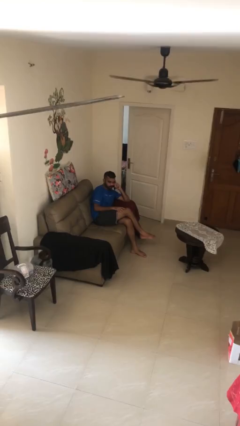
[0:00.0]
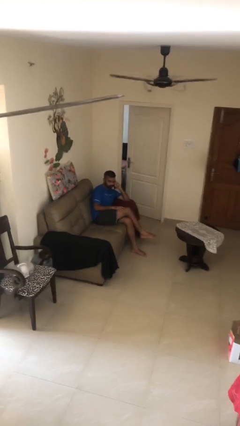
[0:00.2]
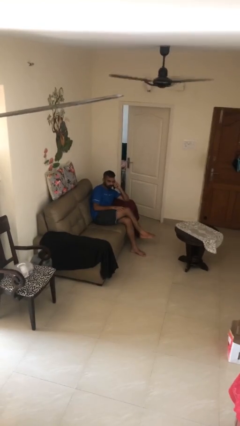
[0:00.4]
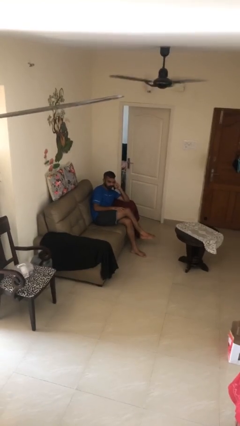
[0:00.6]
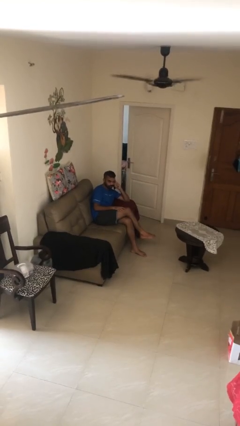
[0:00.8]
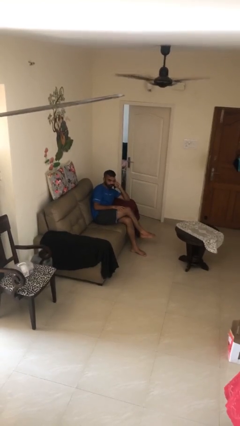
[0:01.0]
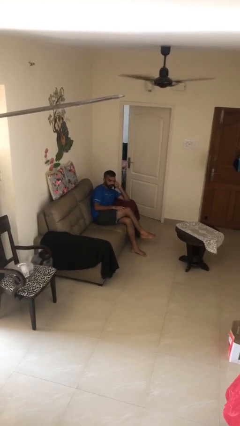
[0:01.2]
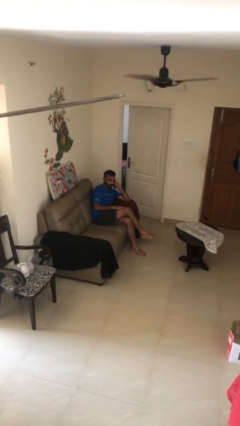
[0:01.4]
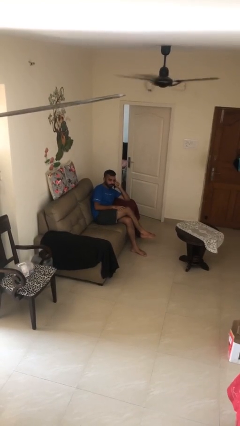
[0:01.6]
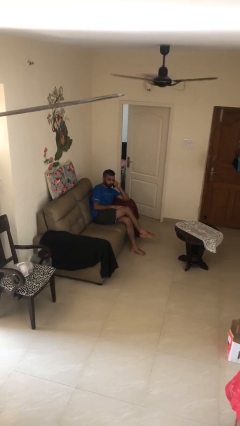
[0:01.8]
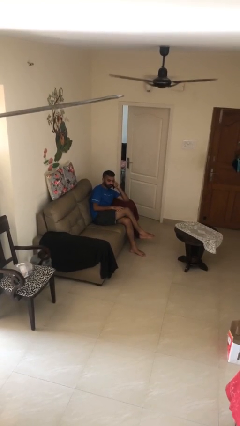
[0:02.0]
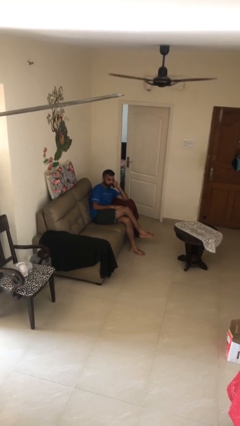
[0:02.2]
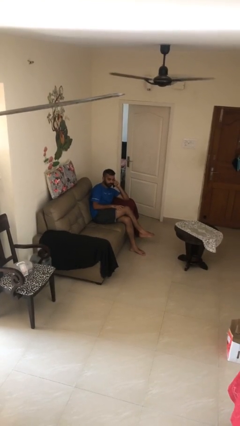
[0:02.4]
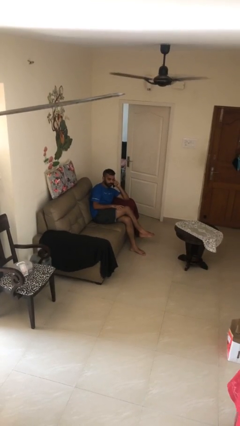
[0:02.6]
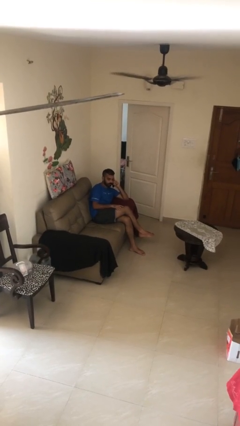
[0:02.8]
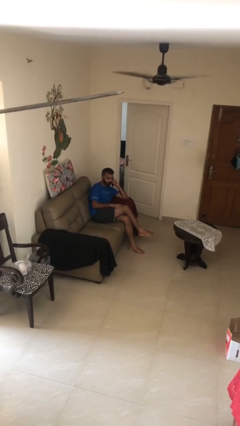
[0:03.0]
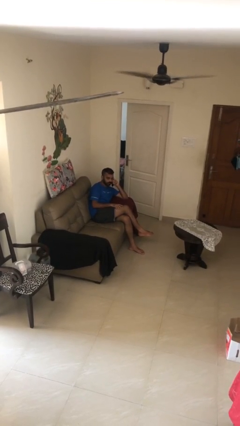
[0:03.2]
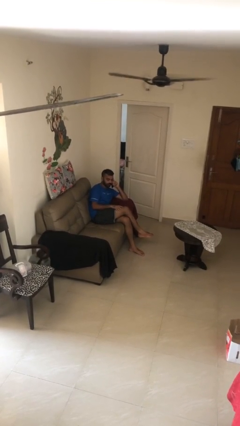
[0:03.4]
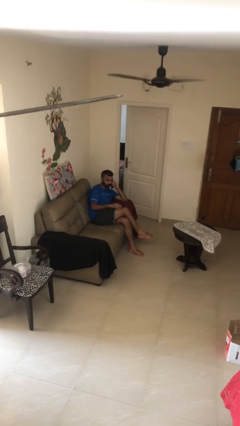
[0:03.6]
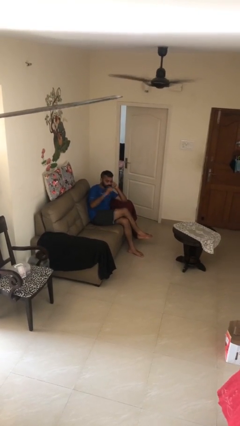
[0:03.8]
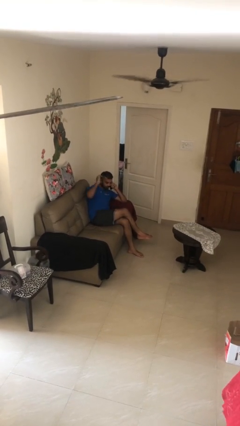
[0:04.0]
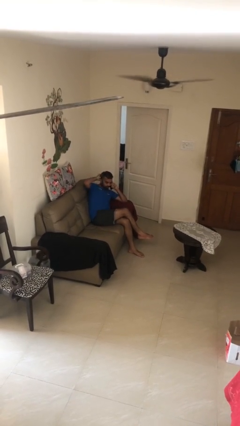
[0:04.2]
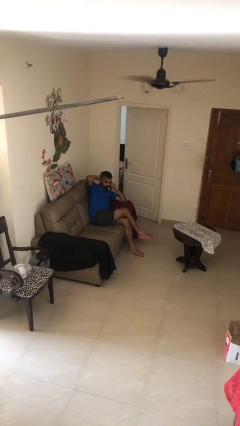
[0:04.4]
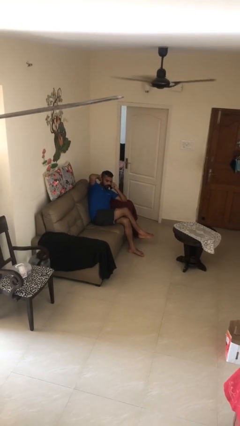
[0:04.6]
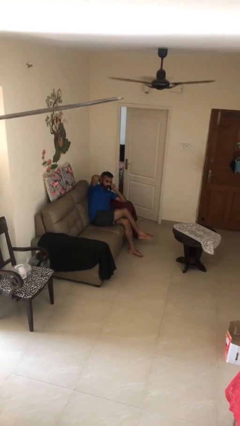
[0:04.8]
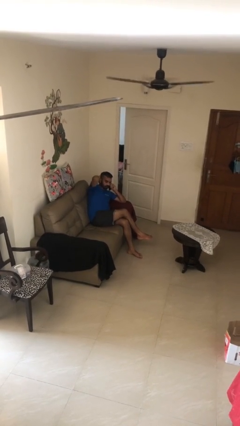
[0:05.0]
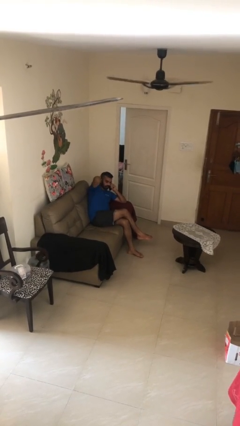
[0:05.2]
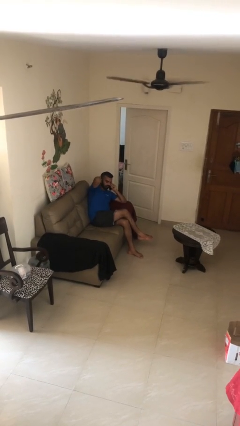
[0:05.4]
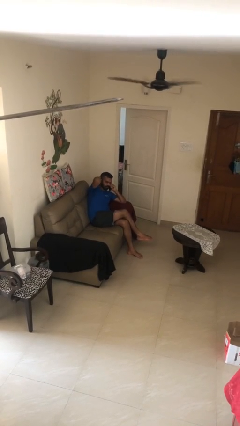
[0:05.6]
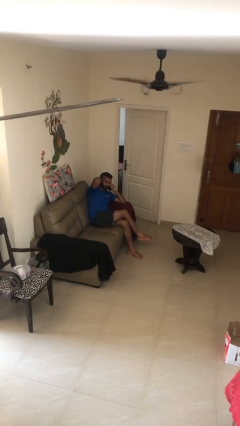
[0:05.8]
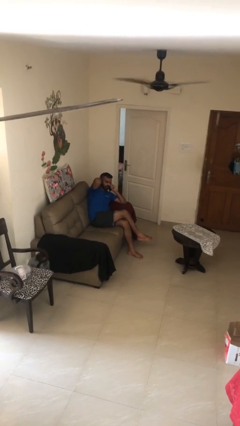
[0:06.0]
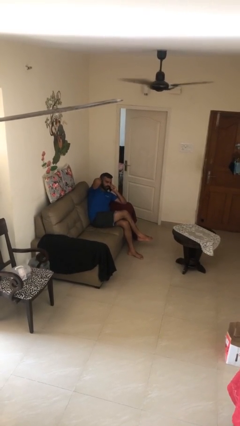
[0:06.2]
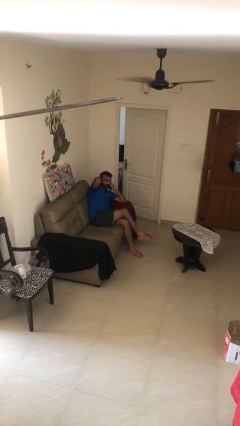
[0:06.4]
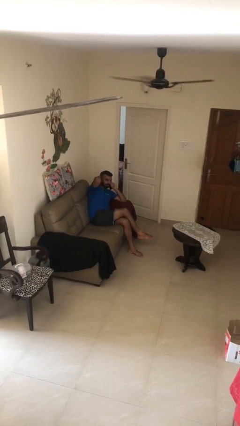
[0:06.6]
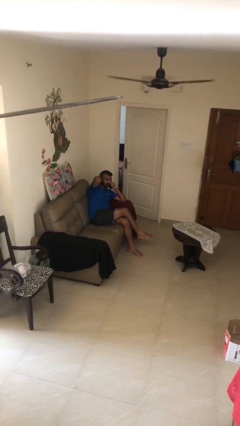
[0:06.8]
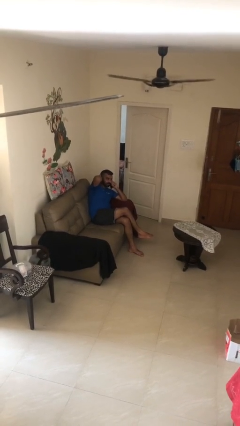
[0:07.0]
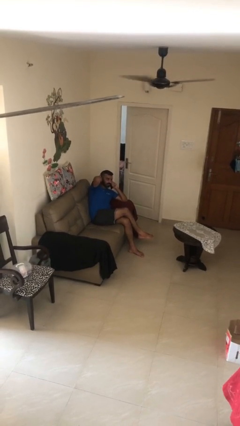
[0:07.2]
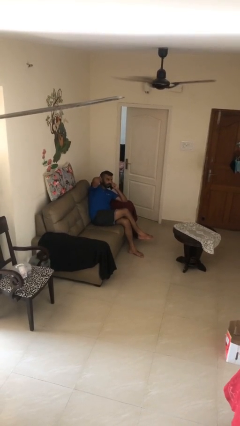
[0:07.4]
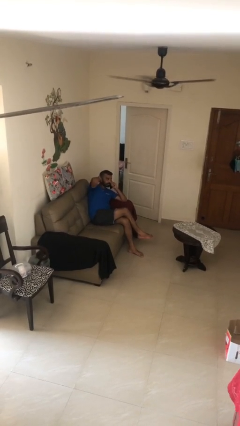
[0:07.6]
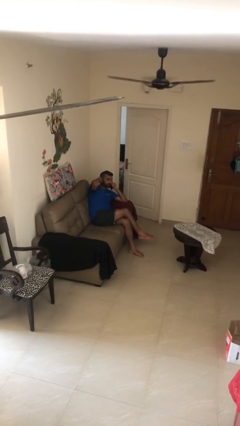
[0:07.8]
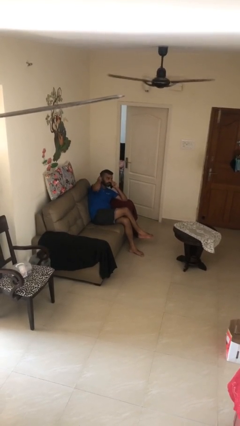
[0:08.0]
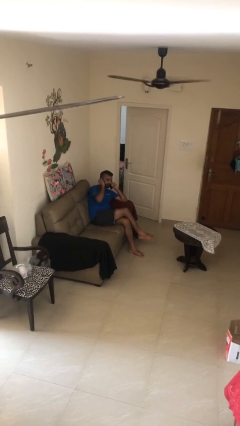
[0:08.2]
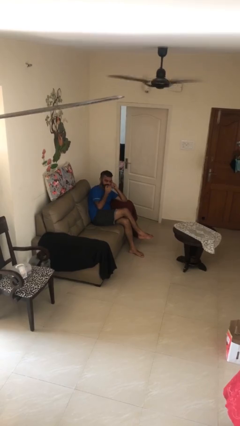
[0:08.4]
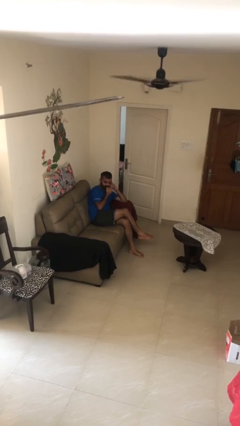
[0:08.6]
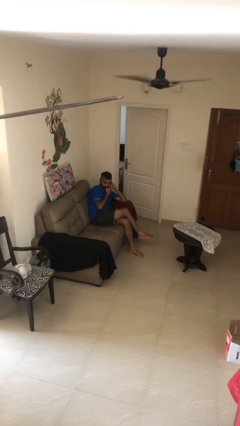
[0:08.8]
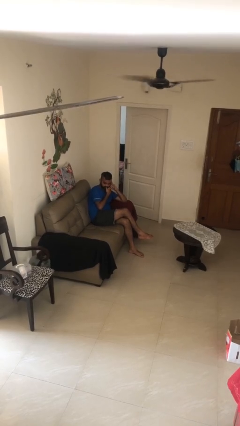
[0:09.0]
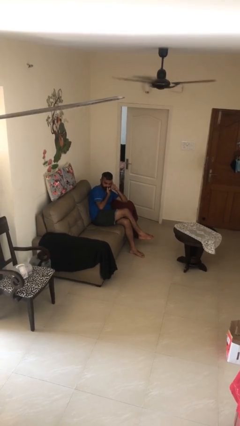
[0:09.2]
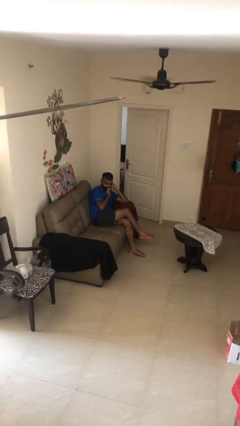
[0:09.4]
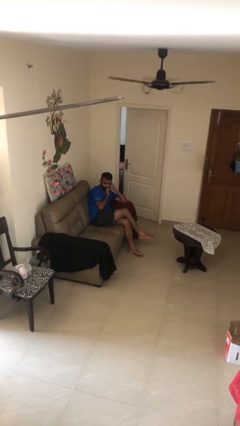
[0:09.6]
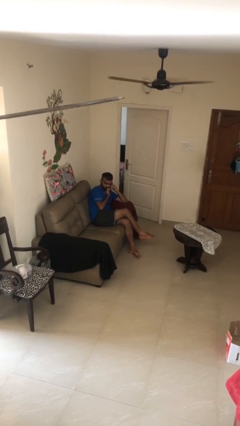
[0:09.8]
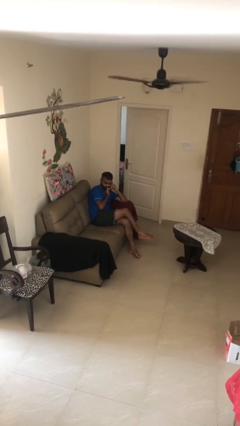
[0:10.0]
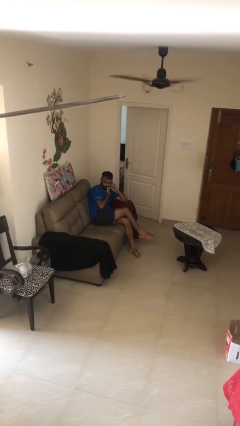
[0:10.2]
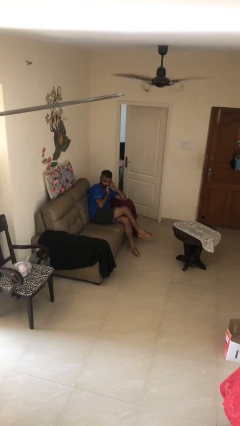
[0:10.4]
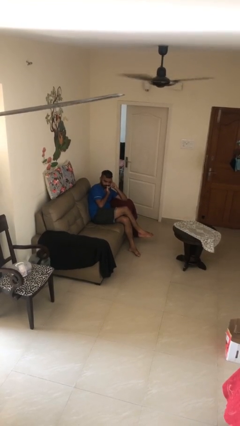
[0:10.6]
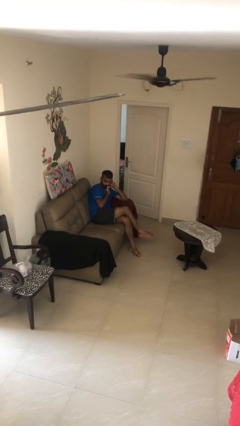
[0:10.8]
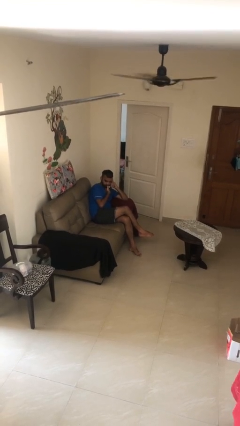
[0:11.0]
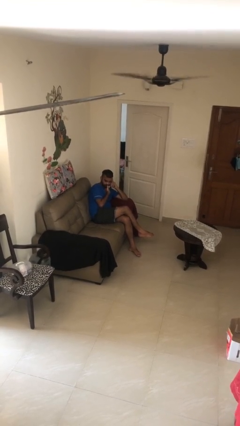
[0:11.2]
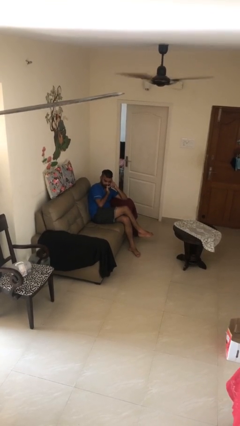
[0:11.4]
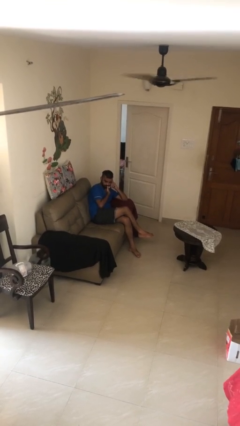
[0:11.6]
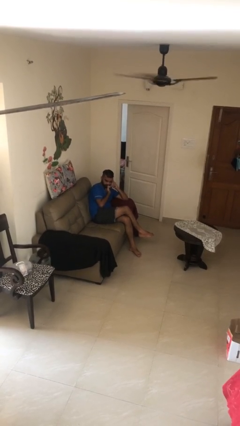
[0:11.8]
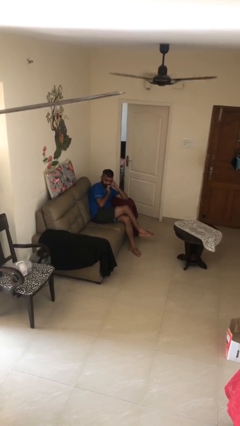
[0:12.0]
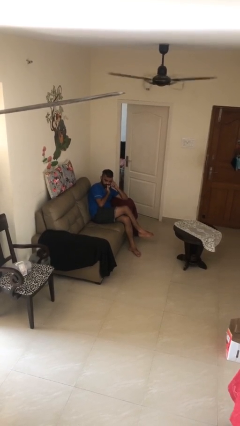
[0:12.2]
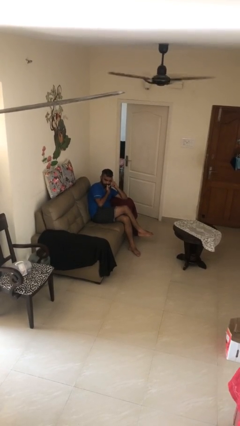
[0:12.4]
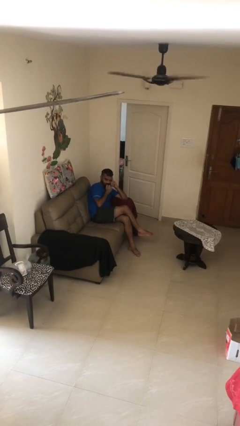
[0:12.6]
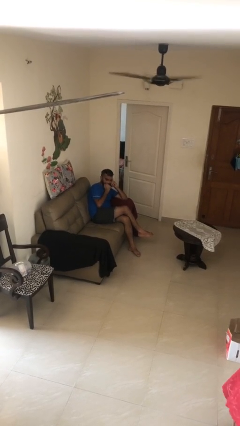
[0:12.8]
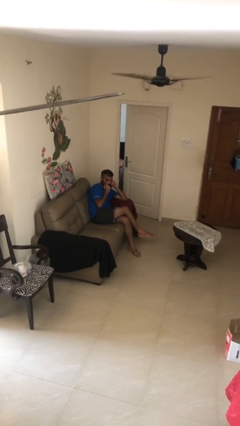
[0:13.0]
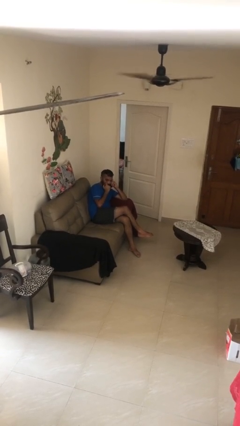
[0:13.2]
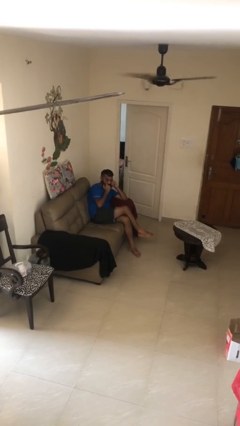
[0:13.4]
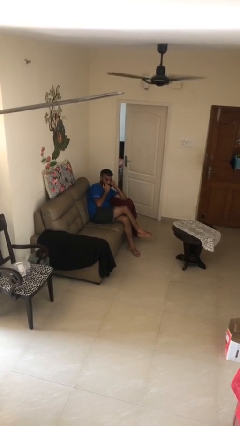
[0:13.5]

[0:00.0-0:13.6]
person talks on phone

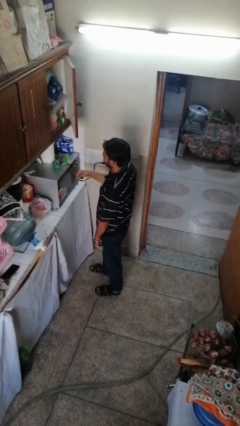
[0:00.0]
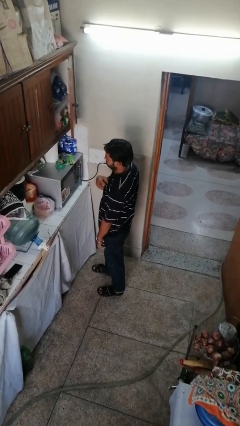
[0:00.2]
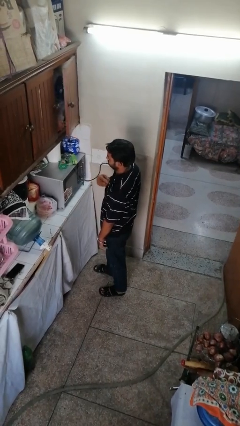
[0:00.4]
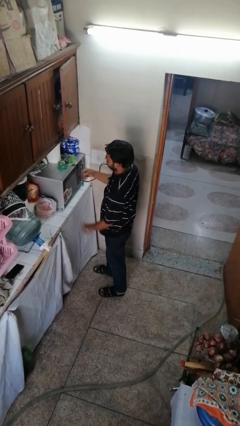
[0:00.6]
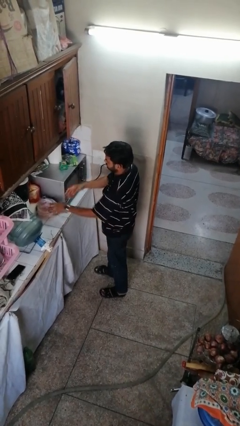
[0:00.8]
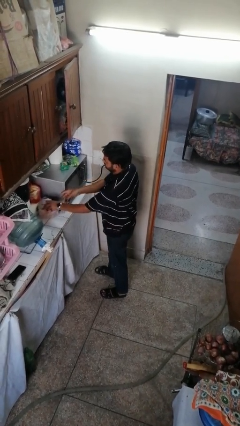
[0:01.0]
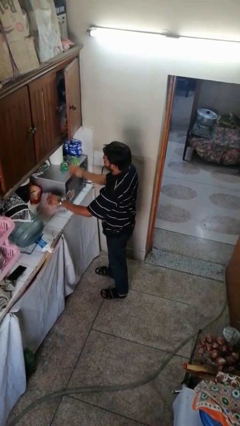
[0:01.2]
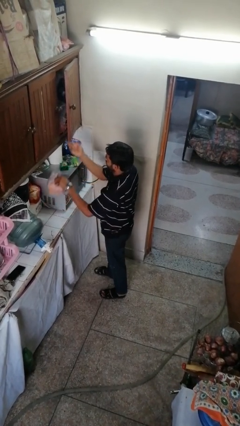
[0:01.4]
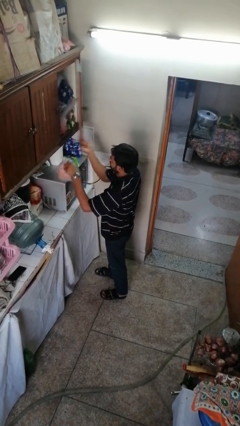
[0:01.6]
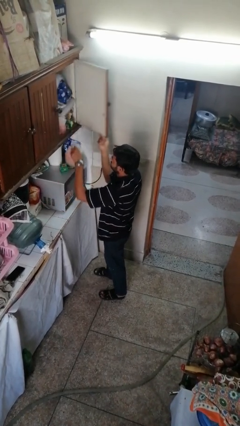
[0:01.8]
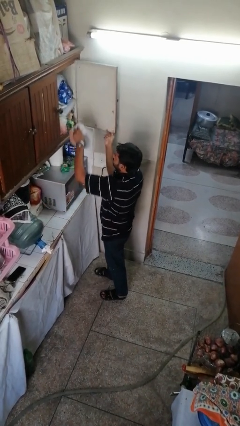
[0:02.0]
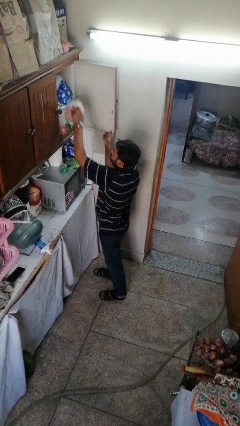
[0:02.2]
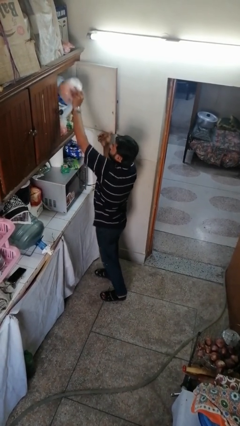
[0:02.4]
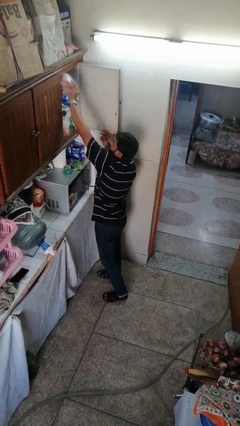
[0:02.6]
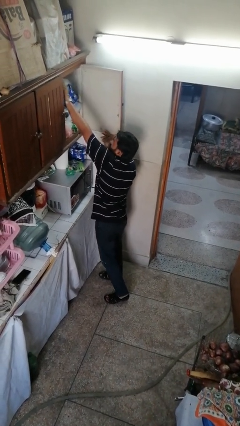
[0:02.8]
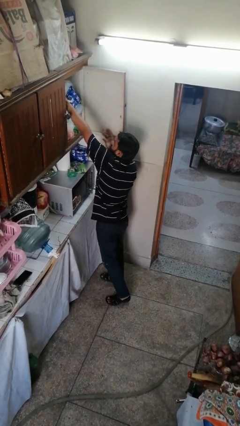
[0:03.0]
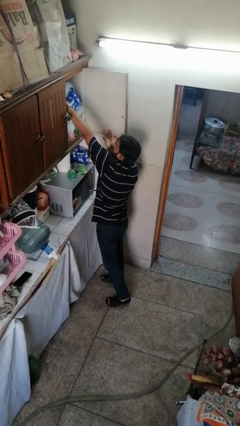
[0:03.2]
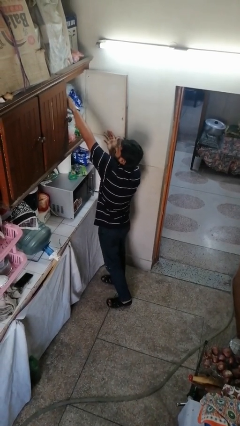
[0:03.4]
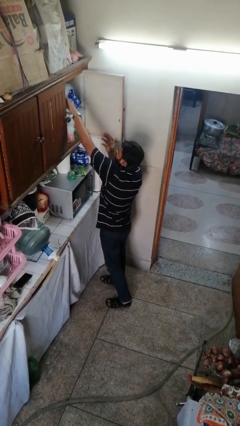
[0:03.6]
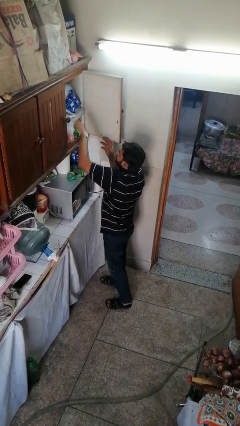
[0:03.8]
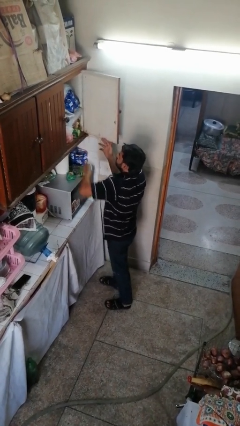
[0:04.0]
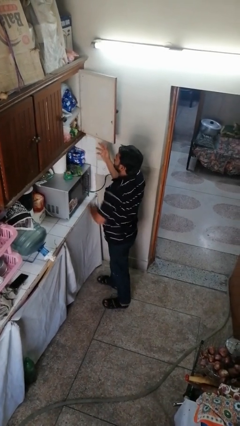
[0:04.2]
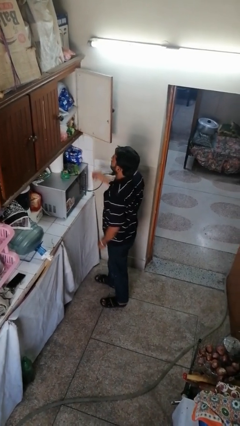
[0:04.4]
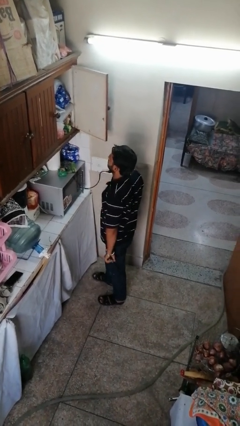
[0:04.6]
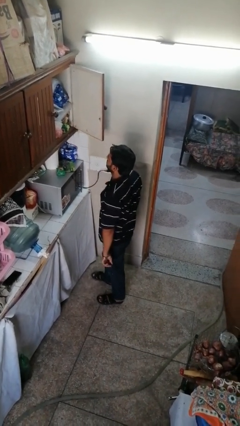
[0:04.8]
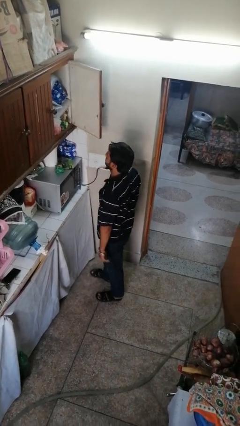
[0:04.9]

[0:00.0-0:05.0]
person loads groceries into cabinet
